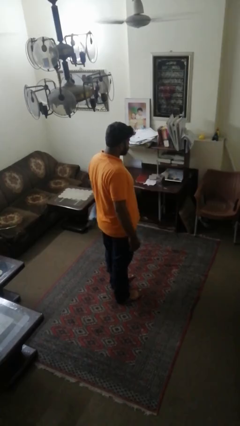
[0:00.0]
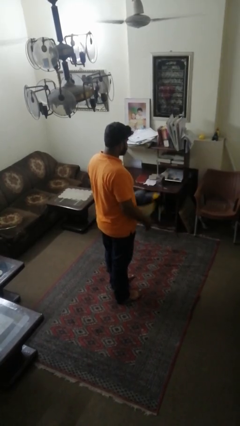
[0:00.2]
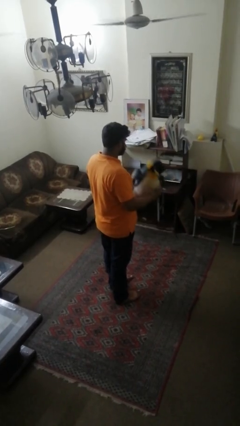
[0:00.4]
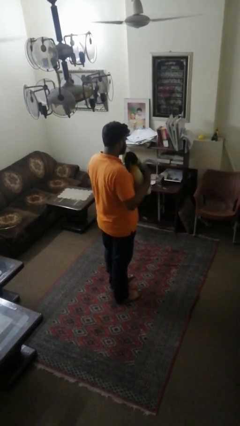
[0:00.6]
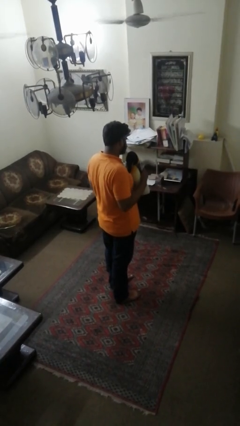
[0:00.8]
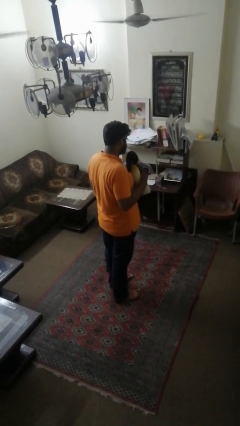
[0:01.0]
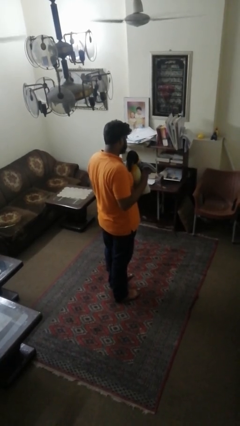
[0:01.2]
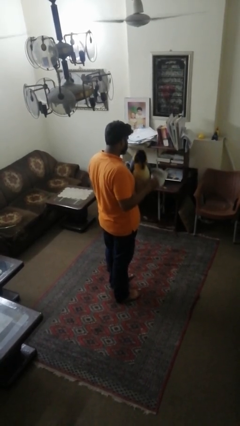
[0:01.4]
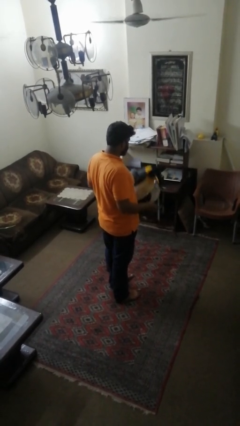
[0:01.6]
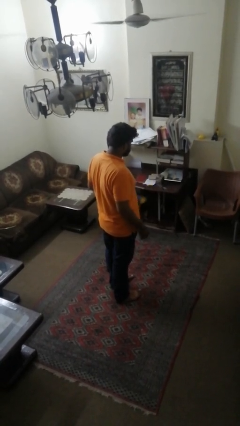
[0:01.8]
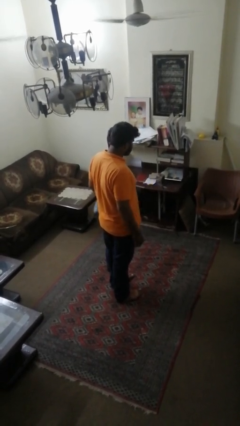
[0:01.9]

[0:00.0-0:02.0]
person hugs stuffed animal

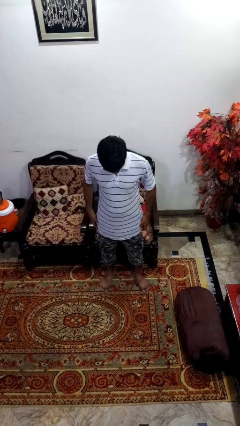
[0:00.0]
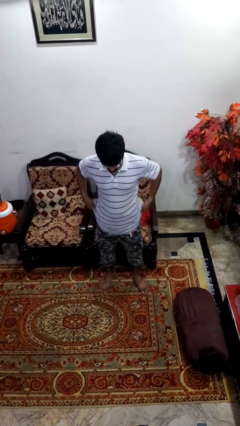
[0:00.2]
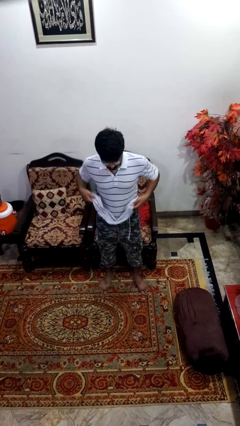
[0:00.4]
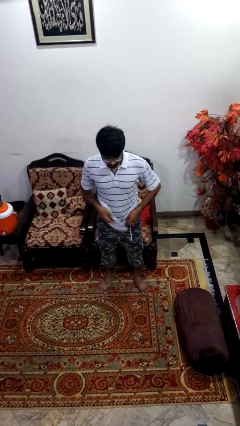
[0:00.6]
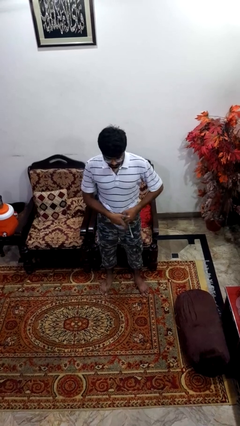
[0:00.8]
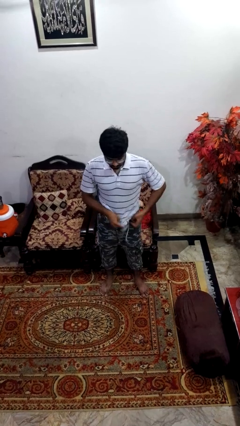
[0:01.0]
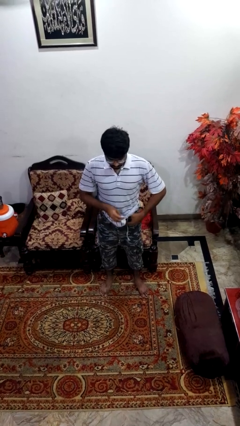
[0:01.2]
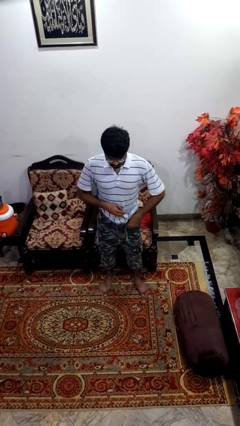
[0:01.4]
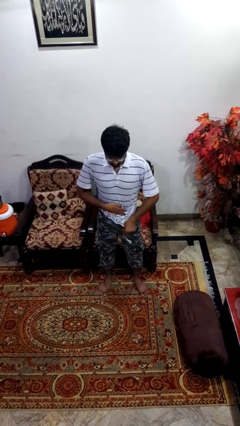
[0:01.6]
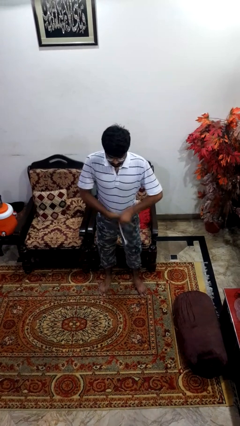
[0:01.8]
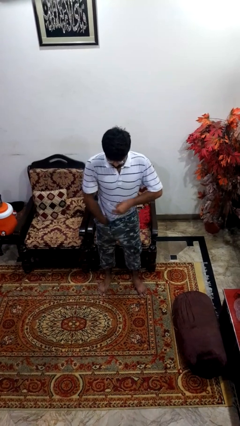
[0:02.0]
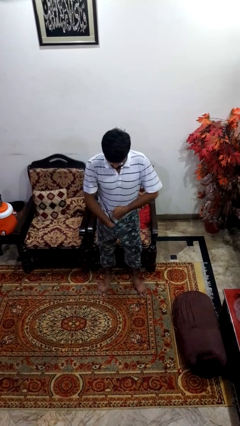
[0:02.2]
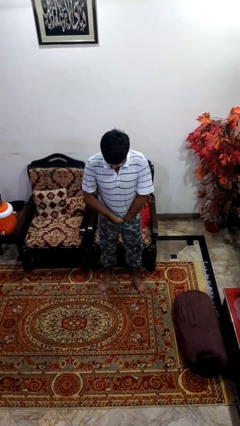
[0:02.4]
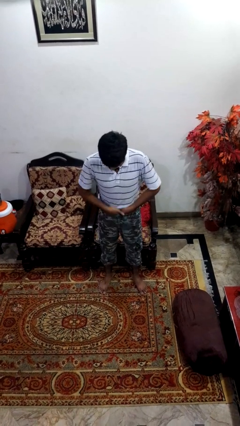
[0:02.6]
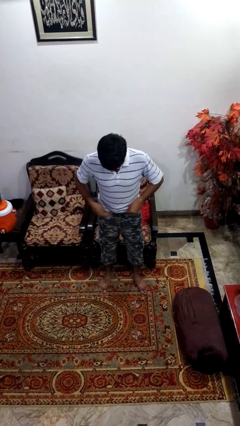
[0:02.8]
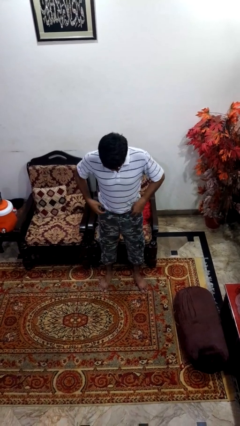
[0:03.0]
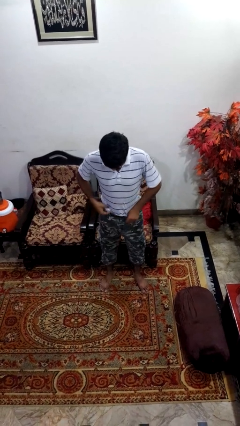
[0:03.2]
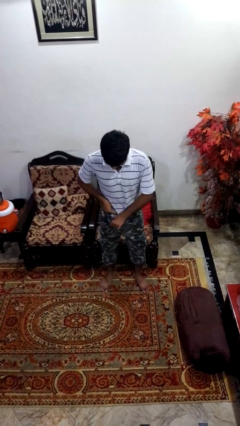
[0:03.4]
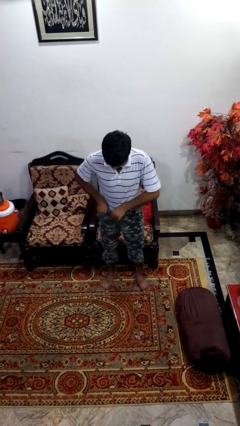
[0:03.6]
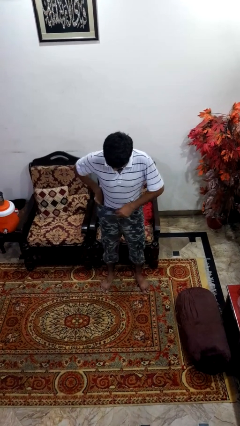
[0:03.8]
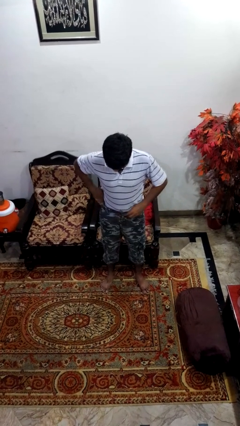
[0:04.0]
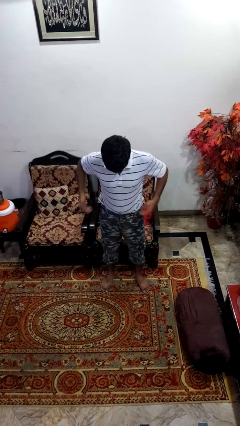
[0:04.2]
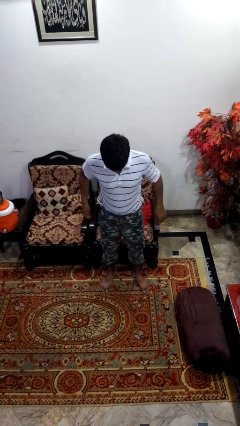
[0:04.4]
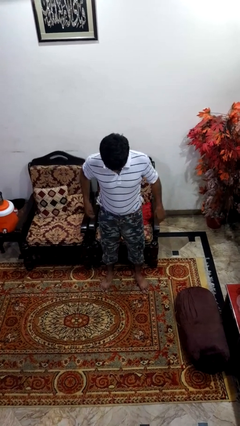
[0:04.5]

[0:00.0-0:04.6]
person tucks in shirt

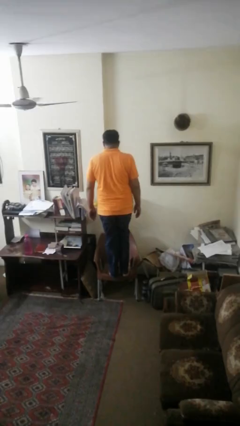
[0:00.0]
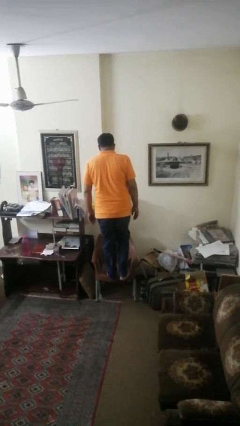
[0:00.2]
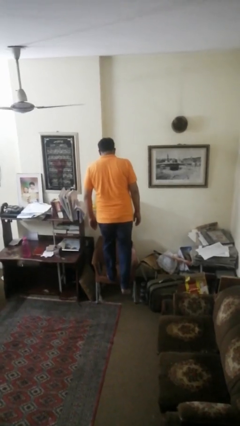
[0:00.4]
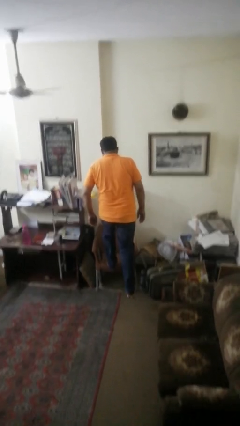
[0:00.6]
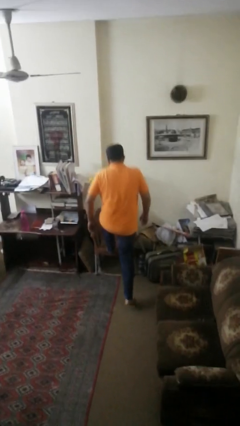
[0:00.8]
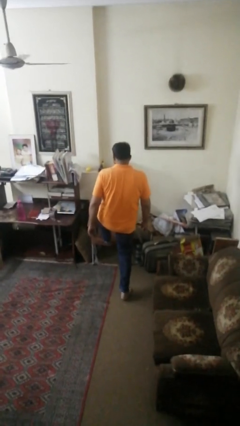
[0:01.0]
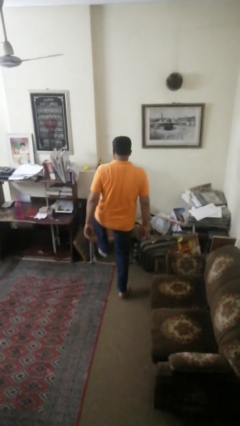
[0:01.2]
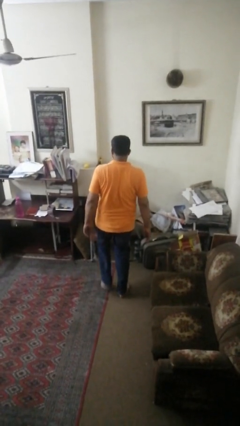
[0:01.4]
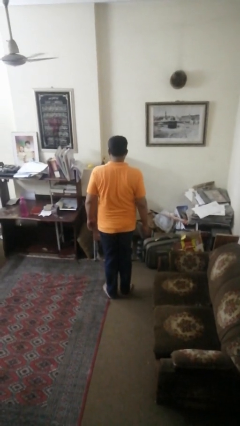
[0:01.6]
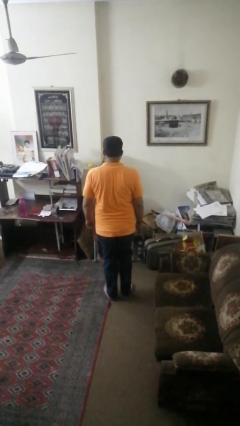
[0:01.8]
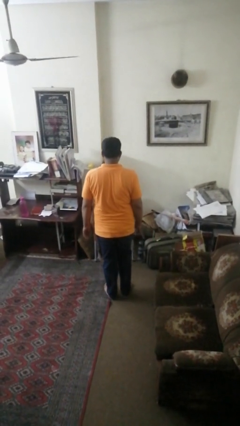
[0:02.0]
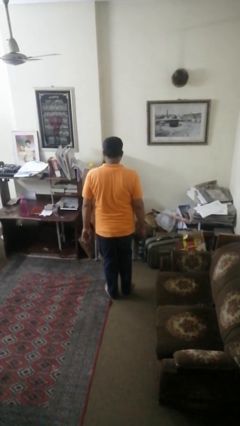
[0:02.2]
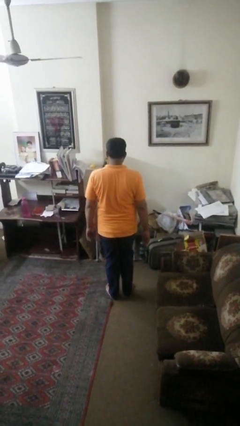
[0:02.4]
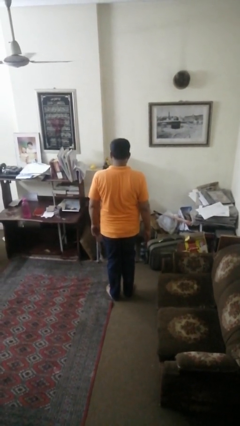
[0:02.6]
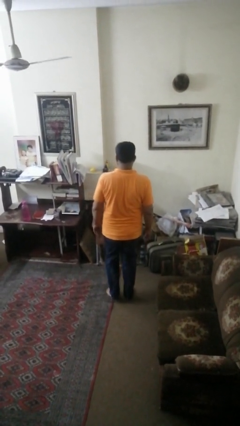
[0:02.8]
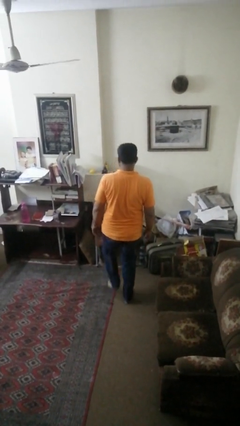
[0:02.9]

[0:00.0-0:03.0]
person climbs off chair

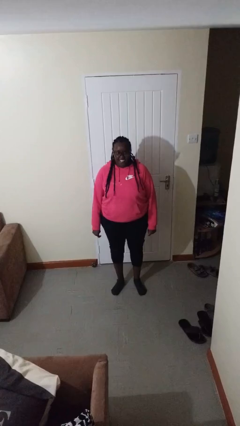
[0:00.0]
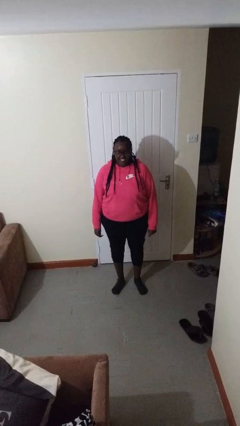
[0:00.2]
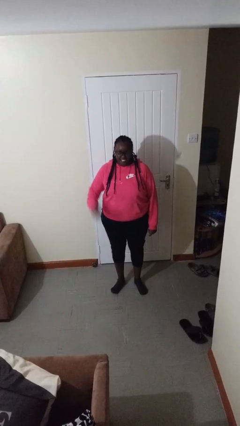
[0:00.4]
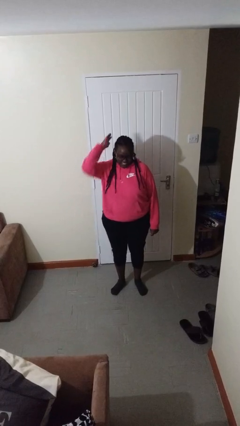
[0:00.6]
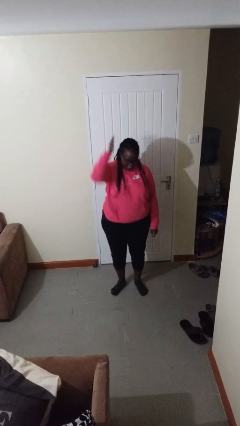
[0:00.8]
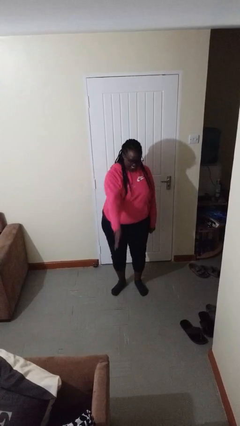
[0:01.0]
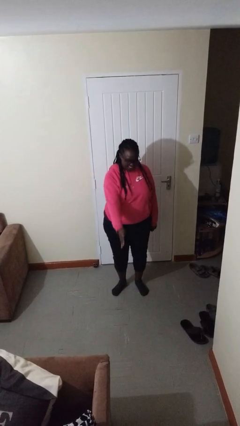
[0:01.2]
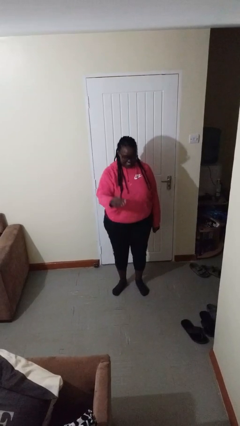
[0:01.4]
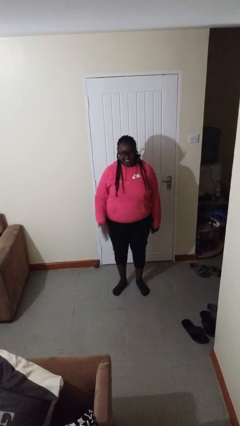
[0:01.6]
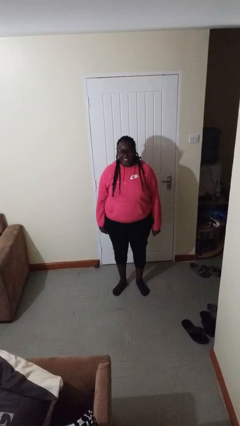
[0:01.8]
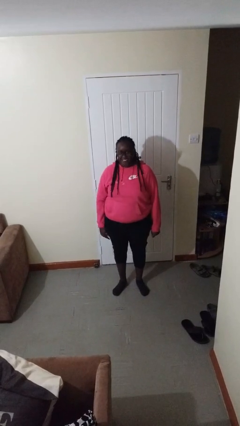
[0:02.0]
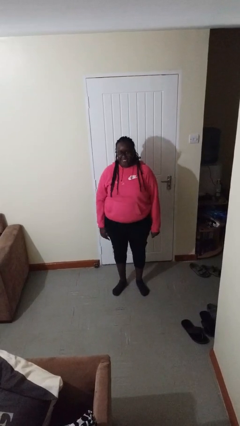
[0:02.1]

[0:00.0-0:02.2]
person karate chop

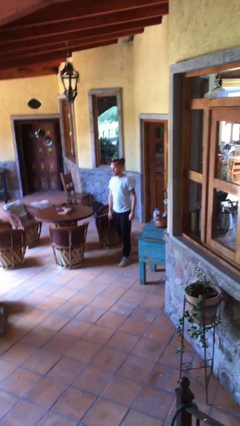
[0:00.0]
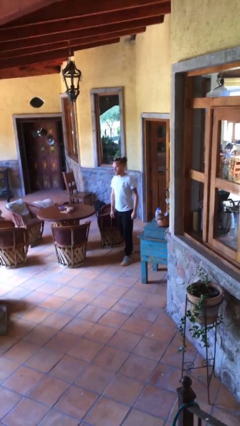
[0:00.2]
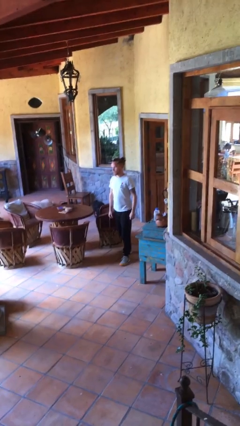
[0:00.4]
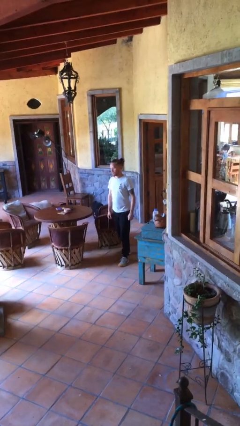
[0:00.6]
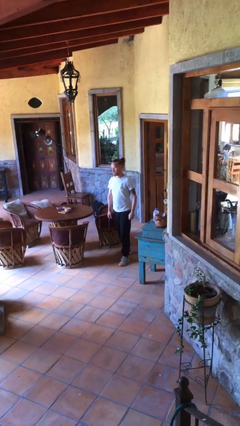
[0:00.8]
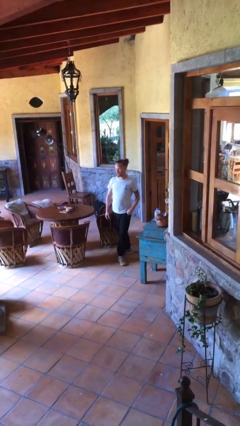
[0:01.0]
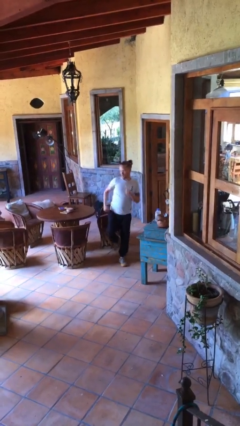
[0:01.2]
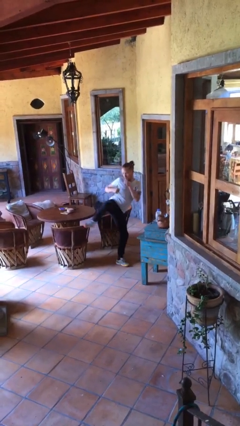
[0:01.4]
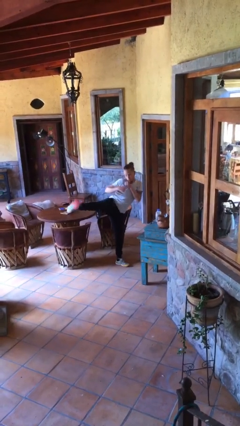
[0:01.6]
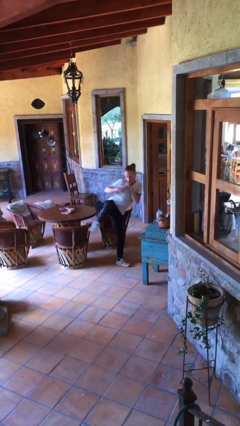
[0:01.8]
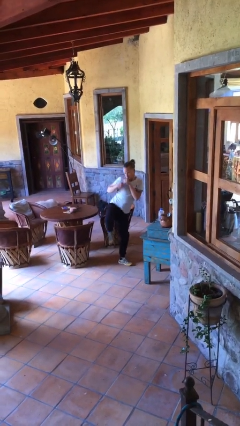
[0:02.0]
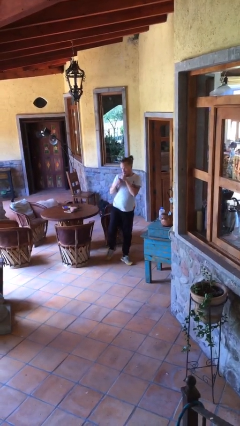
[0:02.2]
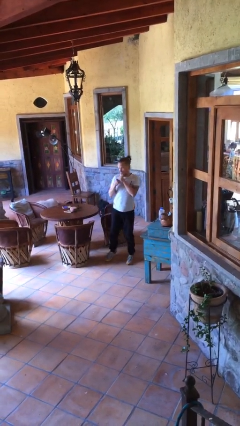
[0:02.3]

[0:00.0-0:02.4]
person karate kicks

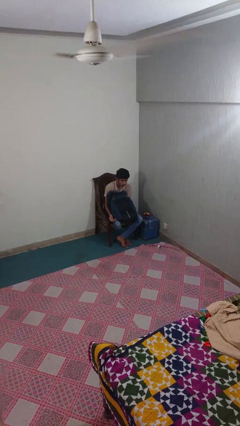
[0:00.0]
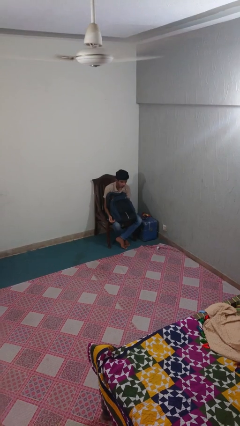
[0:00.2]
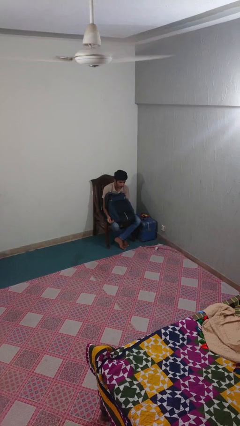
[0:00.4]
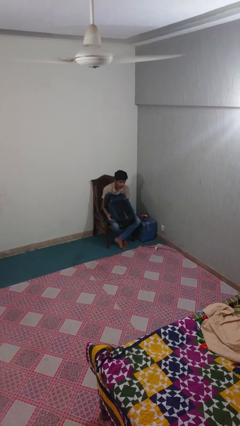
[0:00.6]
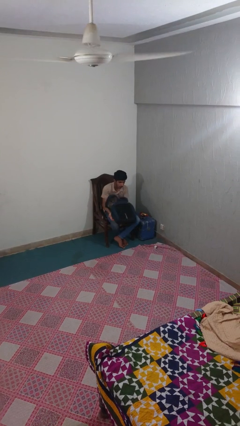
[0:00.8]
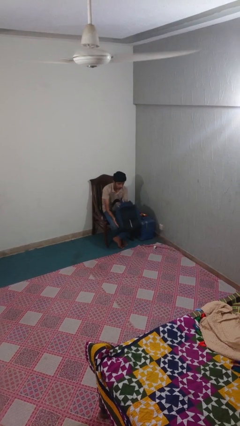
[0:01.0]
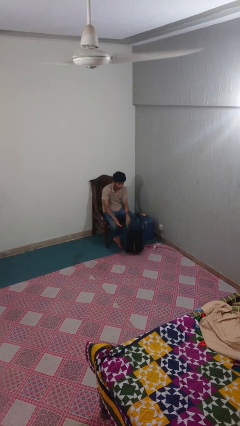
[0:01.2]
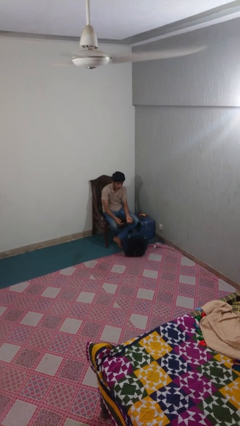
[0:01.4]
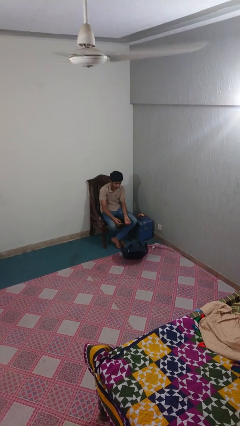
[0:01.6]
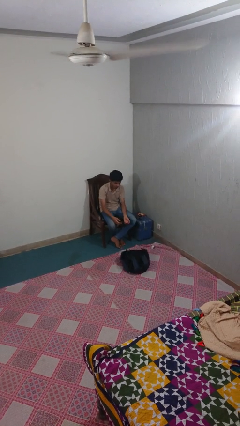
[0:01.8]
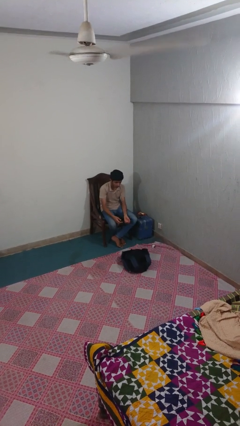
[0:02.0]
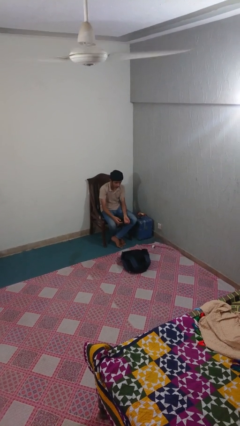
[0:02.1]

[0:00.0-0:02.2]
person drops object
